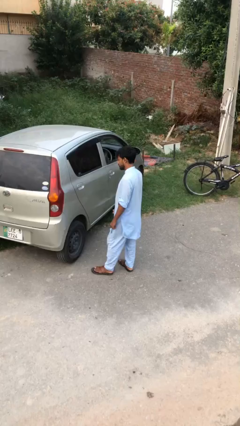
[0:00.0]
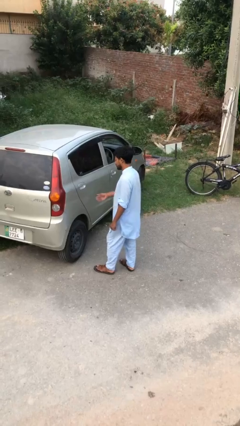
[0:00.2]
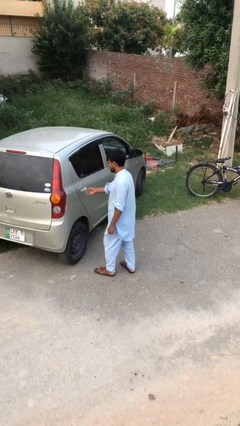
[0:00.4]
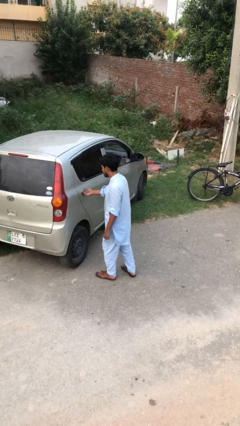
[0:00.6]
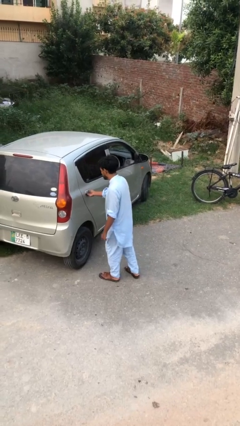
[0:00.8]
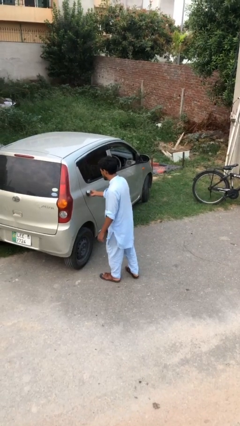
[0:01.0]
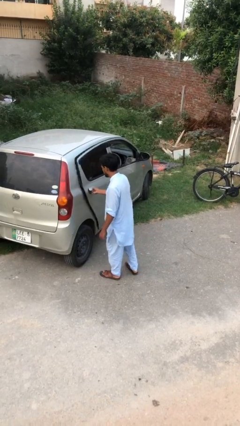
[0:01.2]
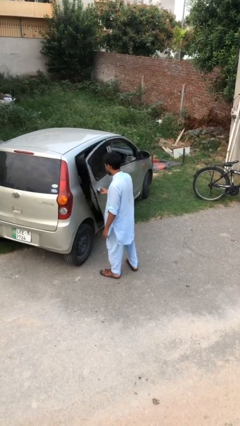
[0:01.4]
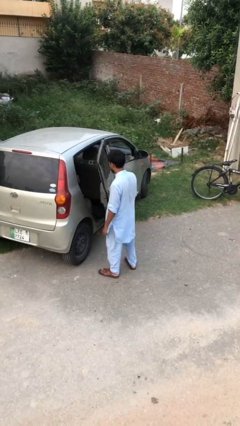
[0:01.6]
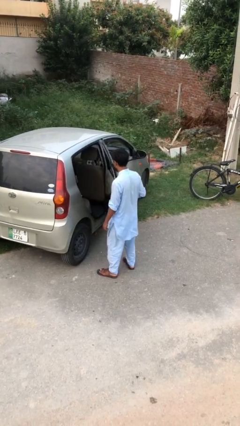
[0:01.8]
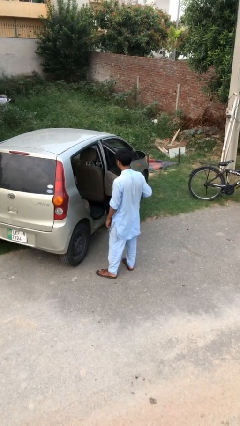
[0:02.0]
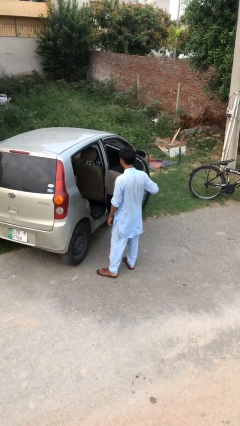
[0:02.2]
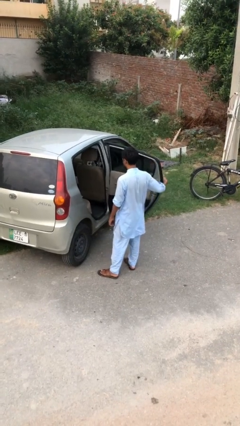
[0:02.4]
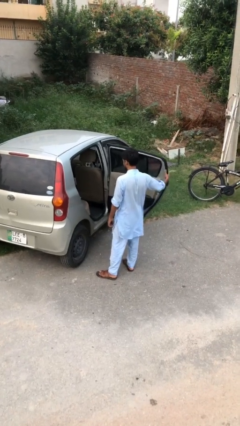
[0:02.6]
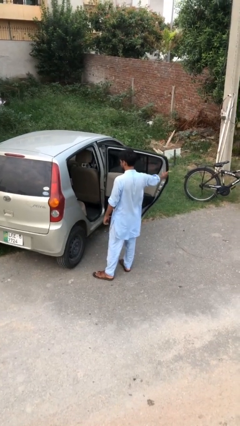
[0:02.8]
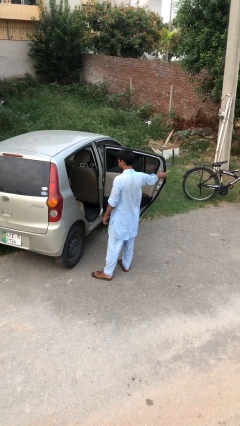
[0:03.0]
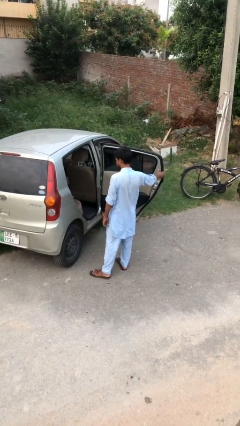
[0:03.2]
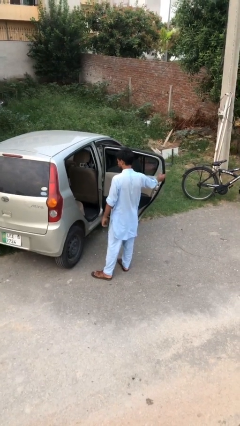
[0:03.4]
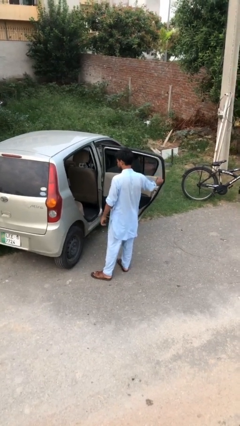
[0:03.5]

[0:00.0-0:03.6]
person opens car door

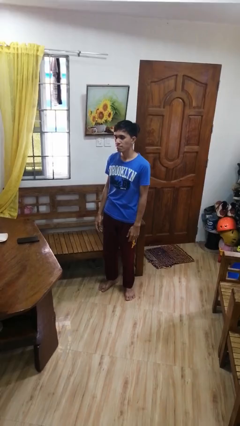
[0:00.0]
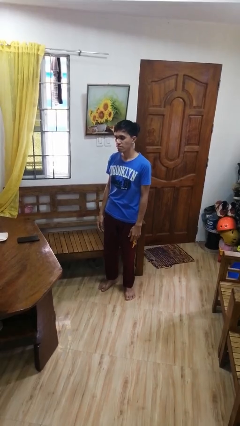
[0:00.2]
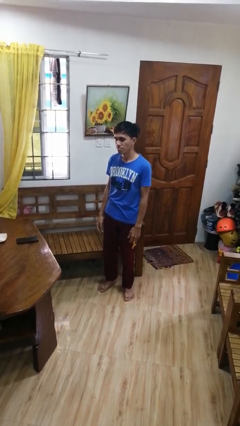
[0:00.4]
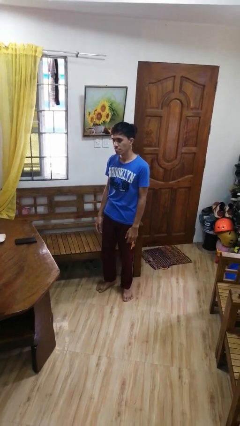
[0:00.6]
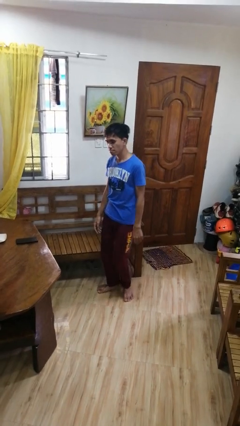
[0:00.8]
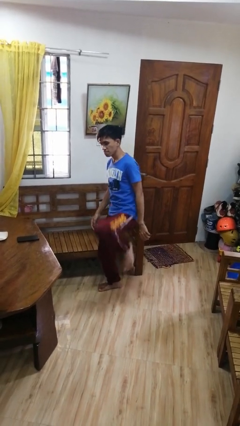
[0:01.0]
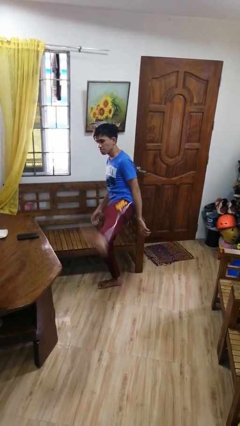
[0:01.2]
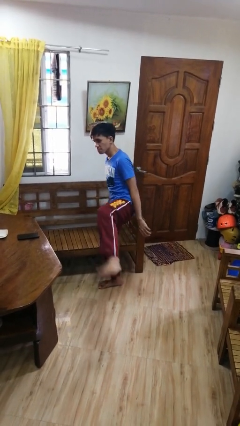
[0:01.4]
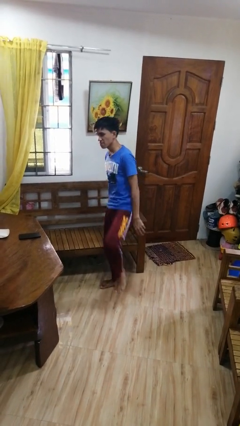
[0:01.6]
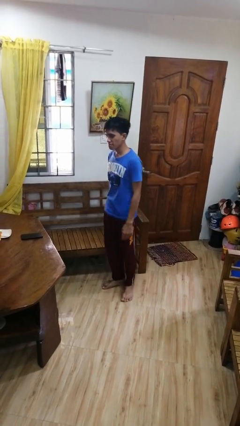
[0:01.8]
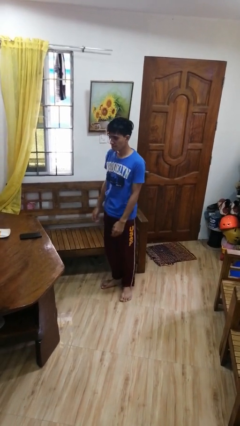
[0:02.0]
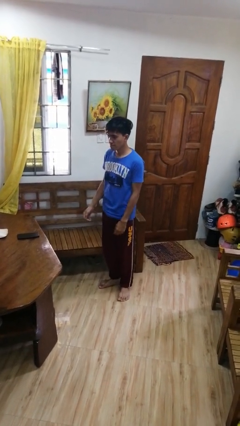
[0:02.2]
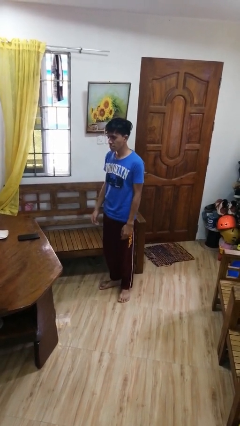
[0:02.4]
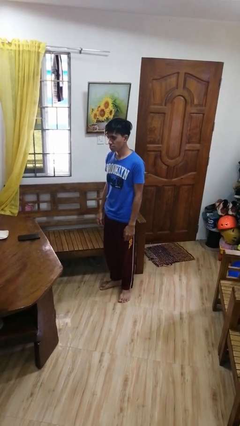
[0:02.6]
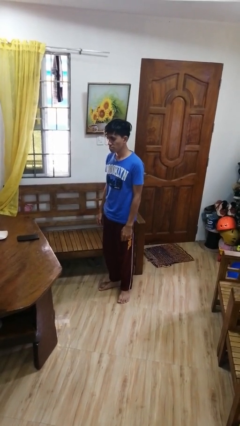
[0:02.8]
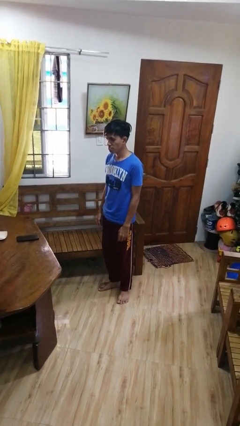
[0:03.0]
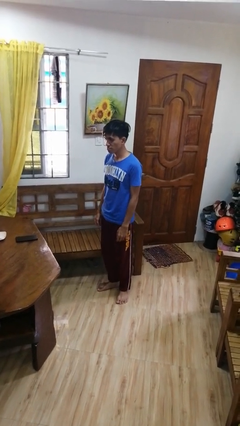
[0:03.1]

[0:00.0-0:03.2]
person karate kicks

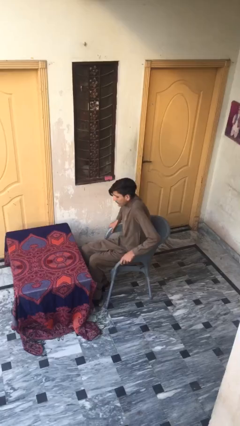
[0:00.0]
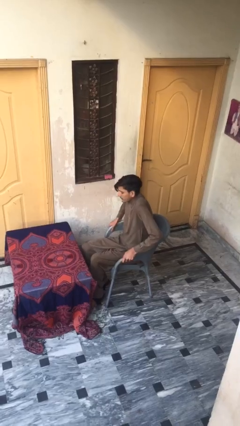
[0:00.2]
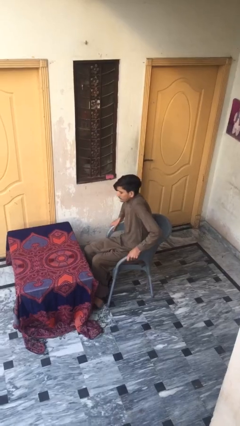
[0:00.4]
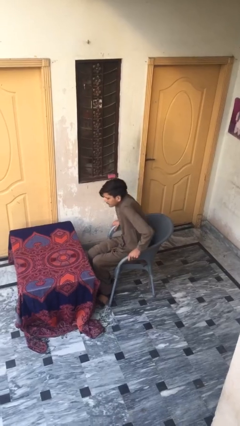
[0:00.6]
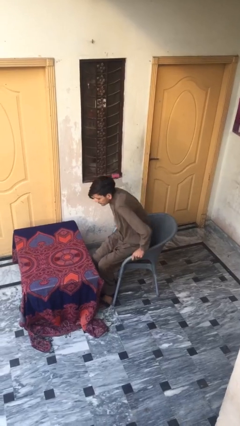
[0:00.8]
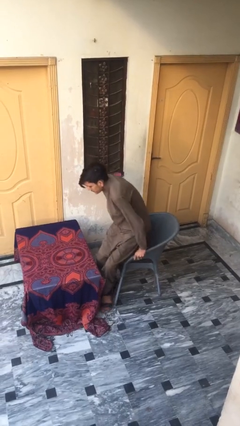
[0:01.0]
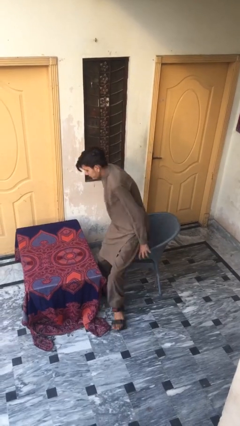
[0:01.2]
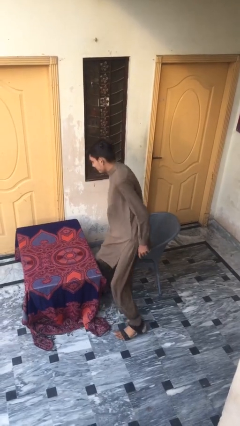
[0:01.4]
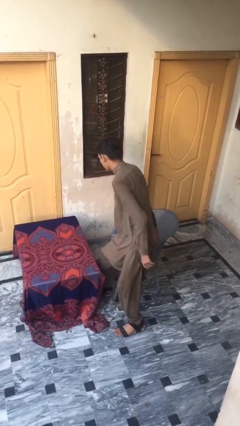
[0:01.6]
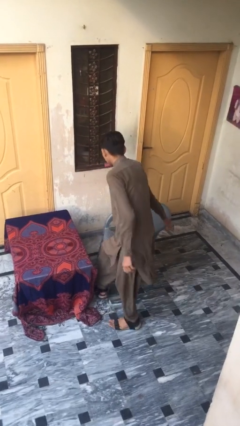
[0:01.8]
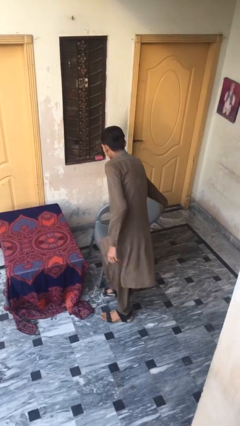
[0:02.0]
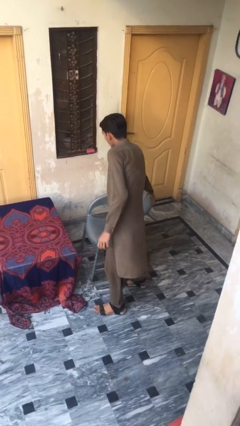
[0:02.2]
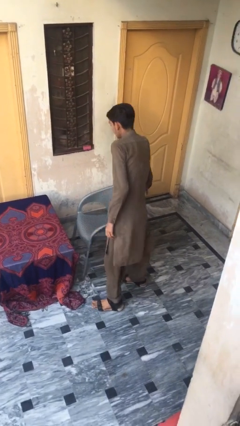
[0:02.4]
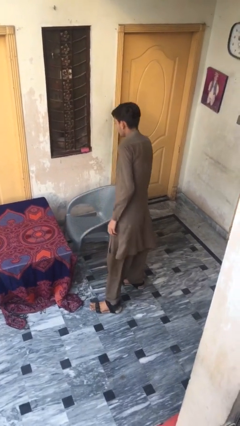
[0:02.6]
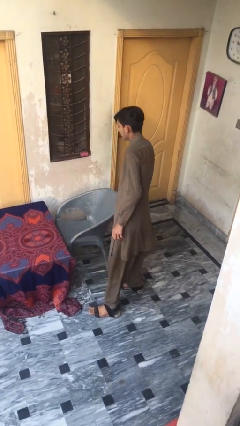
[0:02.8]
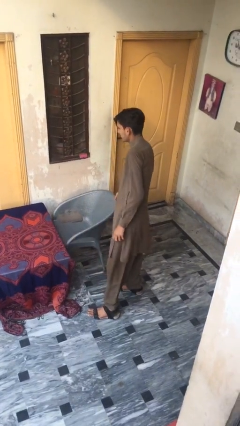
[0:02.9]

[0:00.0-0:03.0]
person stands up

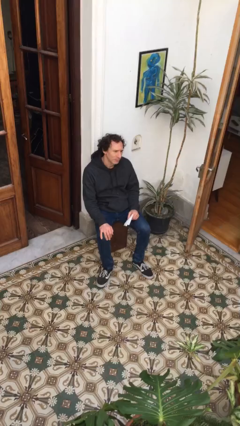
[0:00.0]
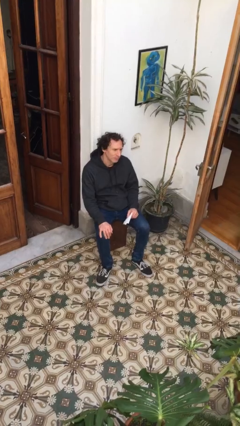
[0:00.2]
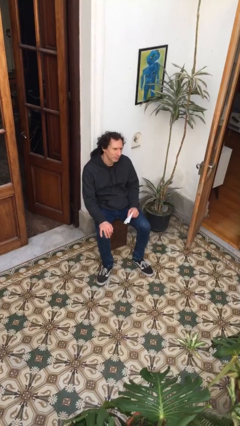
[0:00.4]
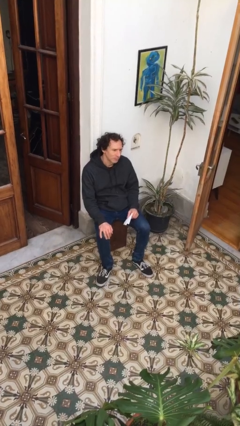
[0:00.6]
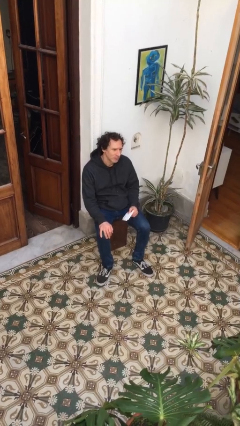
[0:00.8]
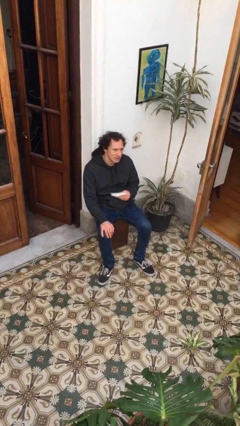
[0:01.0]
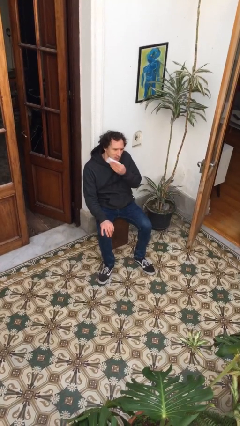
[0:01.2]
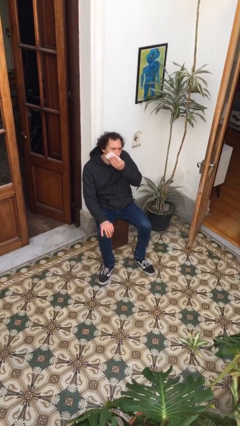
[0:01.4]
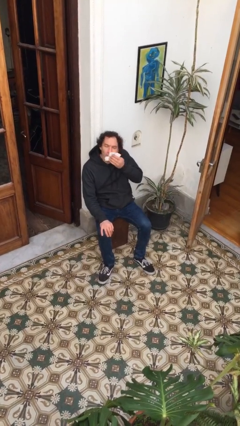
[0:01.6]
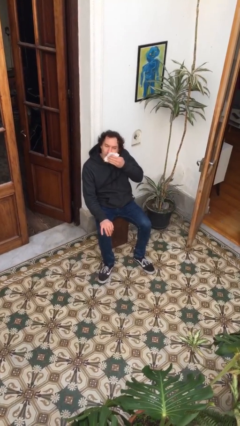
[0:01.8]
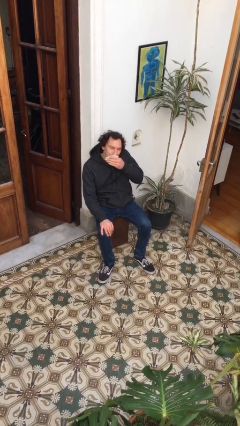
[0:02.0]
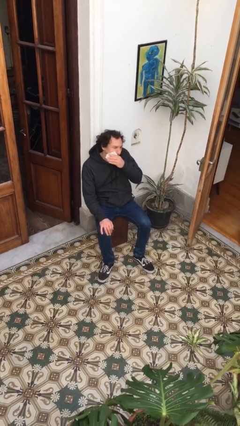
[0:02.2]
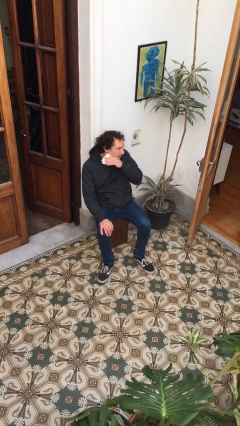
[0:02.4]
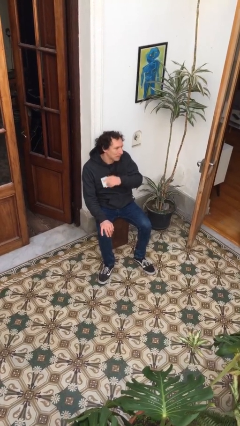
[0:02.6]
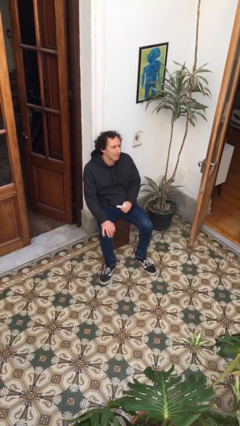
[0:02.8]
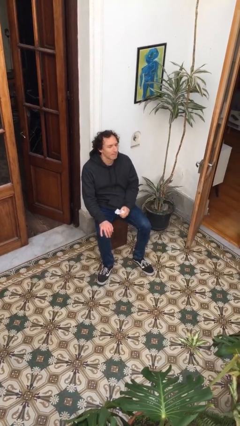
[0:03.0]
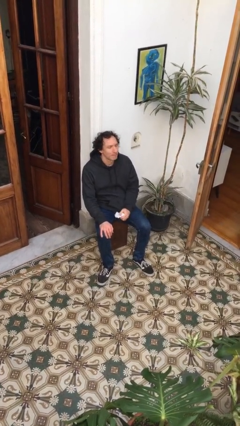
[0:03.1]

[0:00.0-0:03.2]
person wipes mouth with napkin

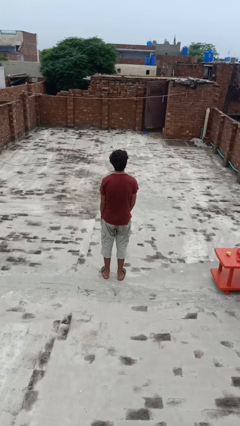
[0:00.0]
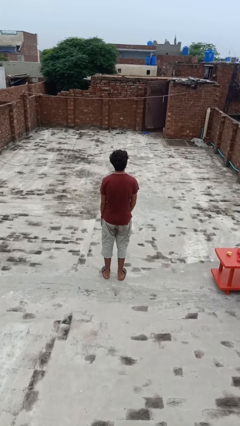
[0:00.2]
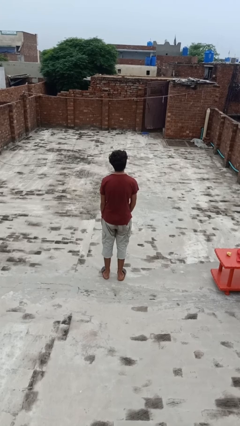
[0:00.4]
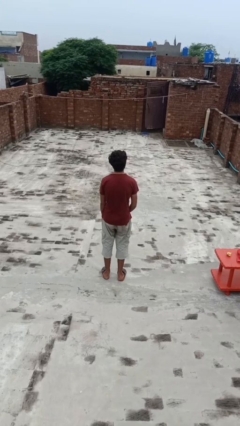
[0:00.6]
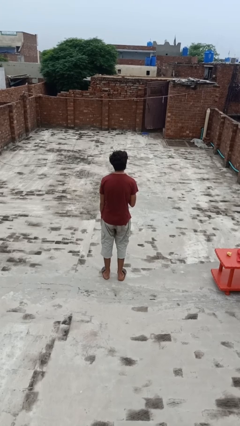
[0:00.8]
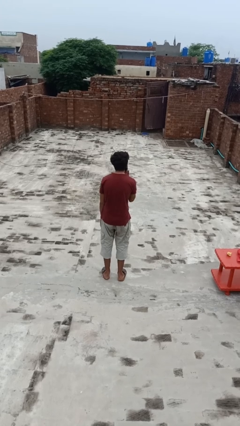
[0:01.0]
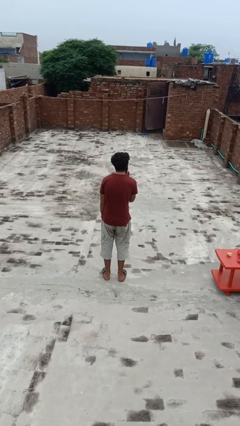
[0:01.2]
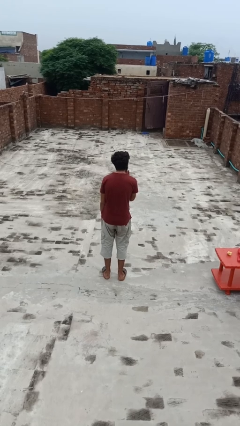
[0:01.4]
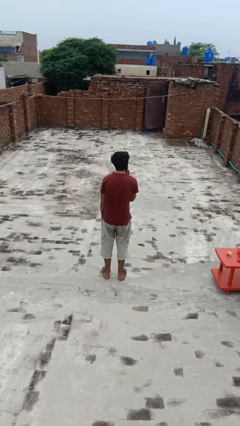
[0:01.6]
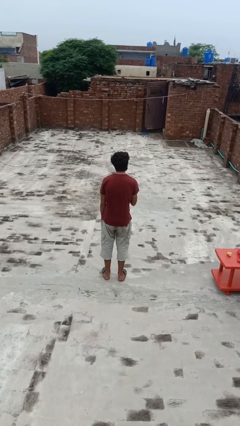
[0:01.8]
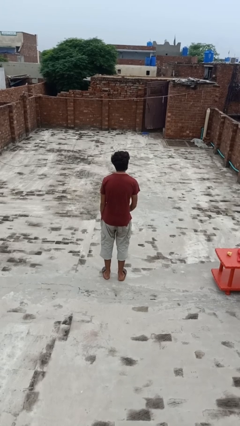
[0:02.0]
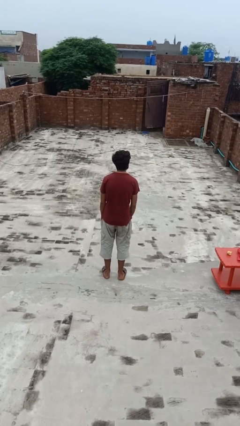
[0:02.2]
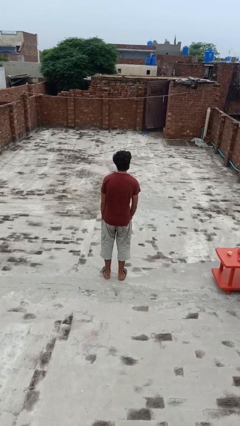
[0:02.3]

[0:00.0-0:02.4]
person gestures blow kiss

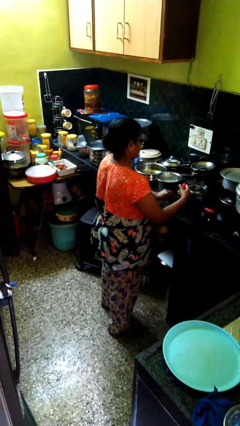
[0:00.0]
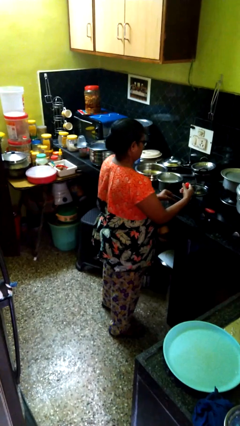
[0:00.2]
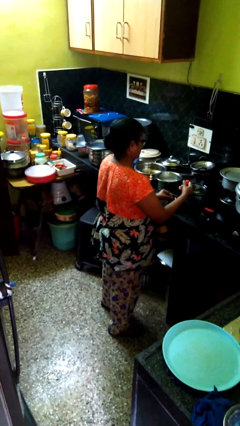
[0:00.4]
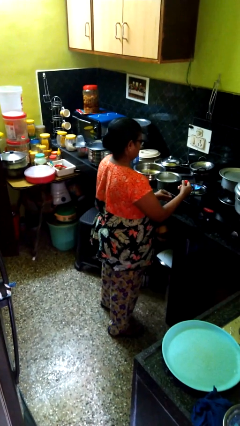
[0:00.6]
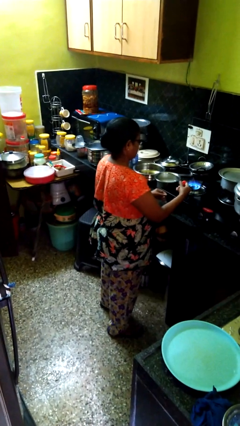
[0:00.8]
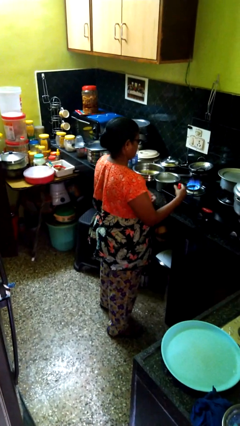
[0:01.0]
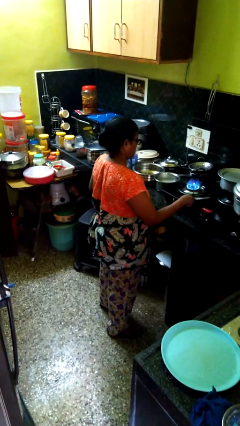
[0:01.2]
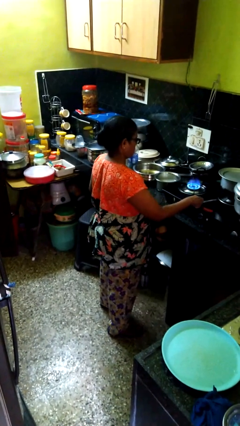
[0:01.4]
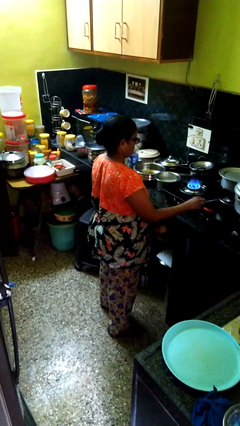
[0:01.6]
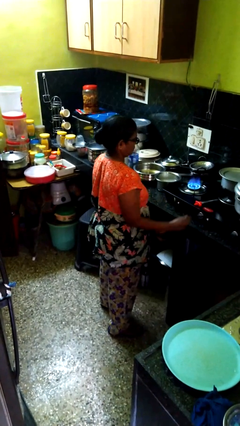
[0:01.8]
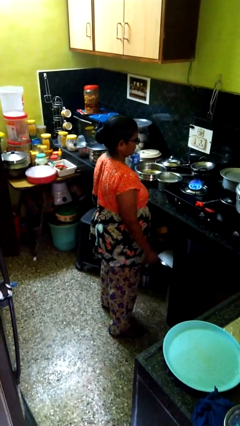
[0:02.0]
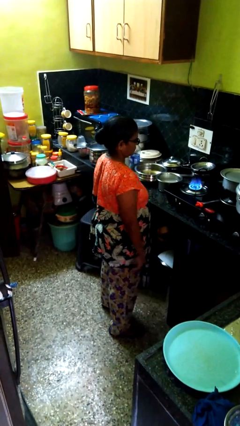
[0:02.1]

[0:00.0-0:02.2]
person turns on stovetop
